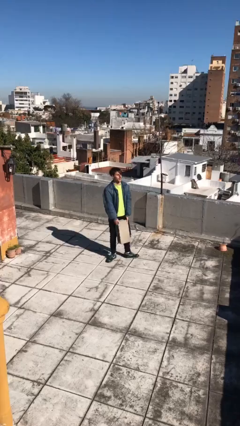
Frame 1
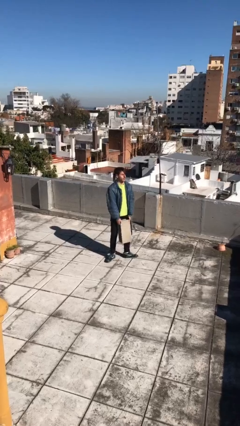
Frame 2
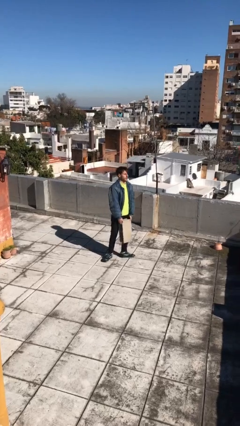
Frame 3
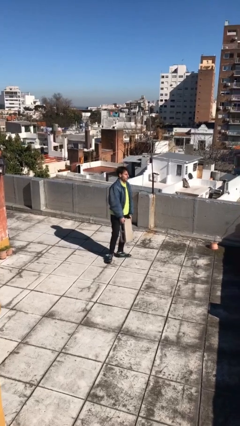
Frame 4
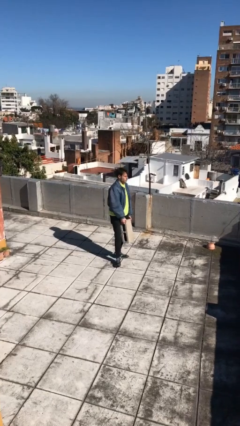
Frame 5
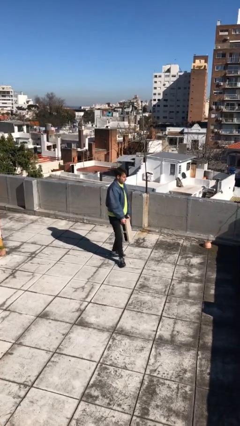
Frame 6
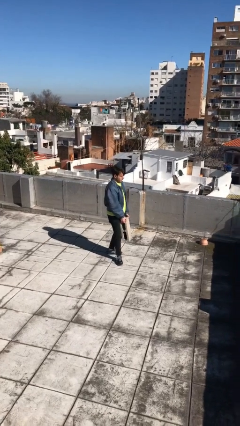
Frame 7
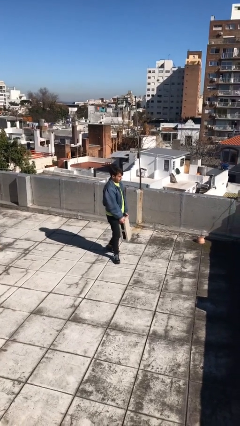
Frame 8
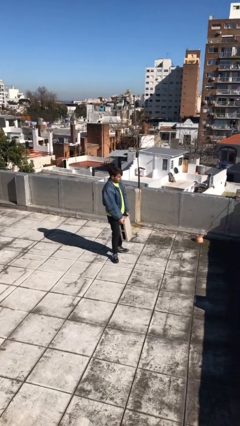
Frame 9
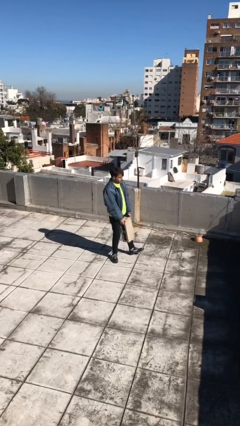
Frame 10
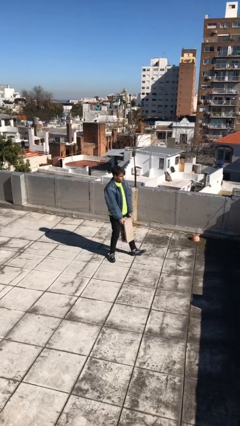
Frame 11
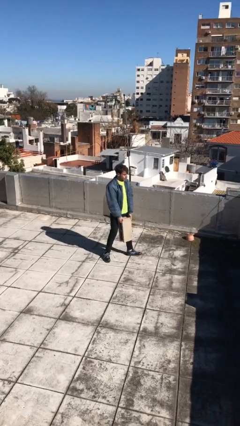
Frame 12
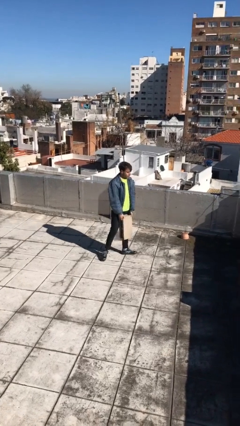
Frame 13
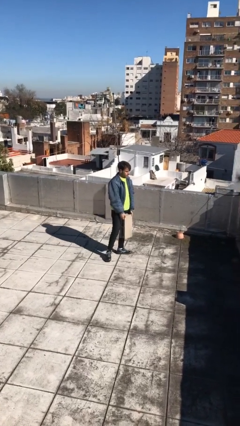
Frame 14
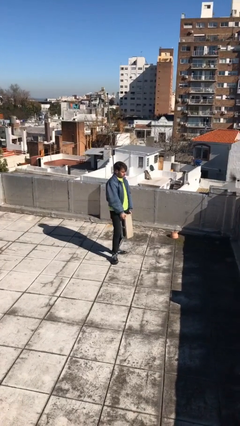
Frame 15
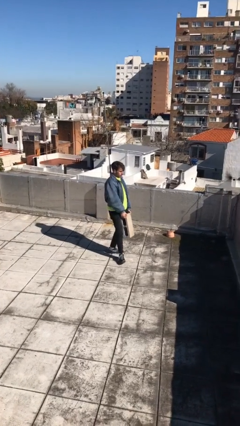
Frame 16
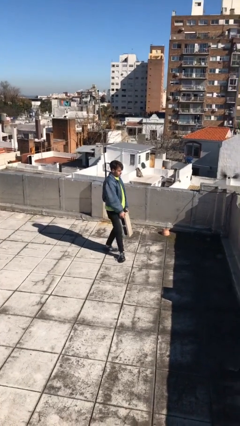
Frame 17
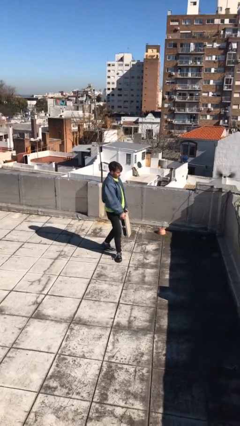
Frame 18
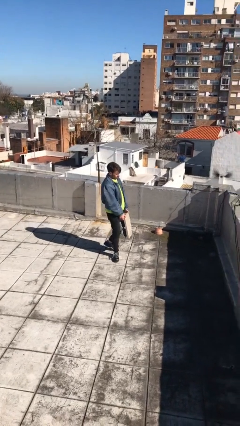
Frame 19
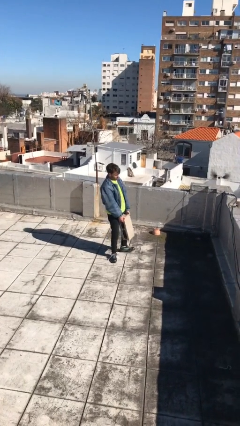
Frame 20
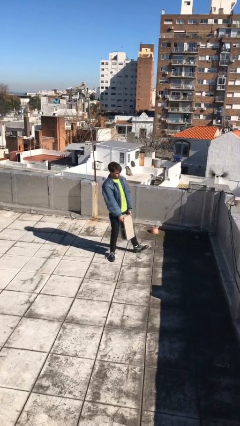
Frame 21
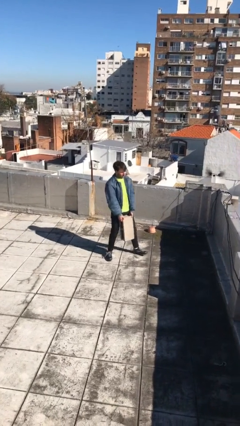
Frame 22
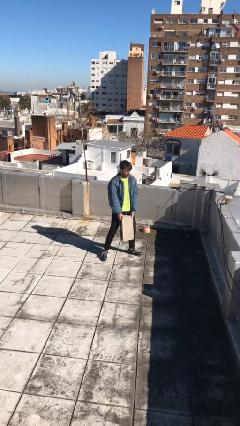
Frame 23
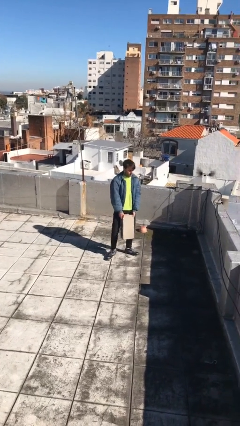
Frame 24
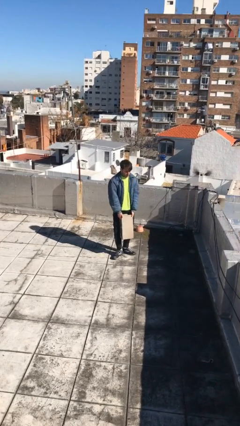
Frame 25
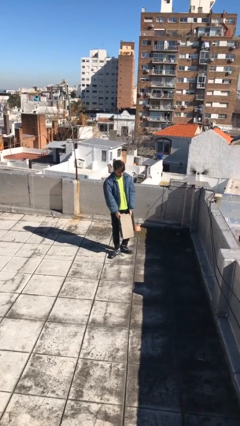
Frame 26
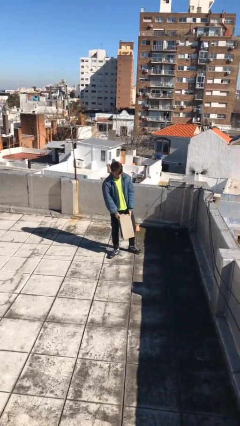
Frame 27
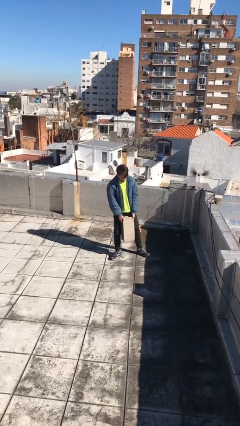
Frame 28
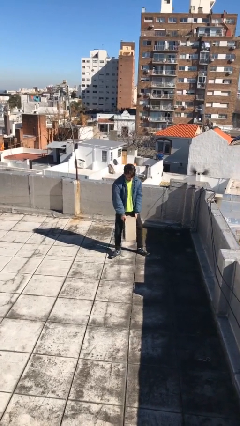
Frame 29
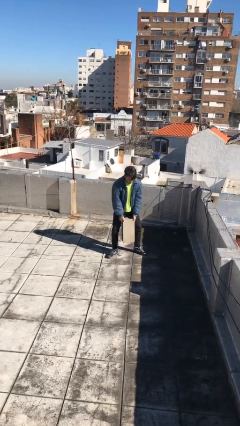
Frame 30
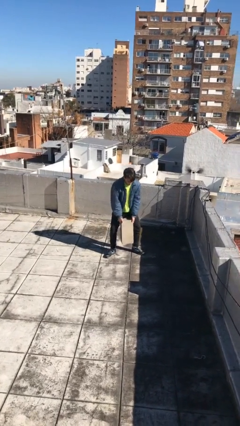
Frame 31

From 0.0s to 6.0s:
person carries heavy object

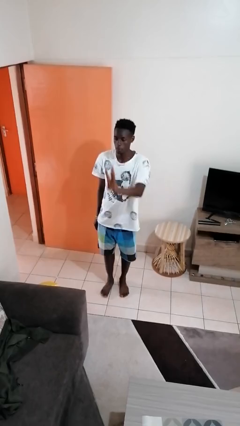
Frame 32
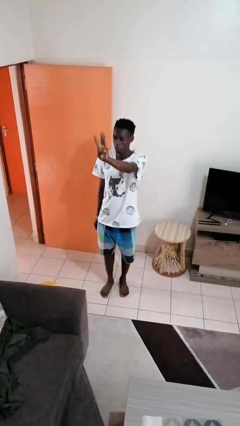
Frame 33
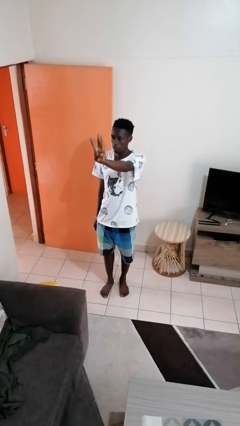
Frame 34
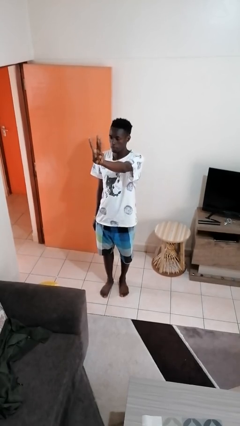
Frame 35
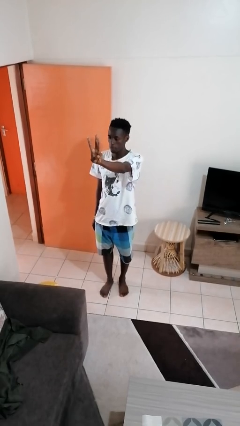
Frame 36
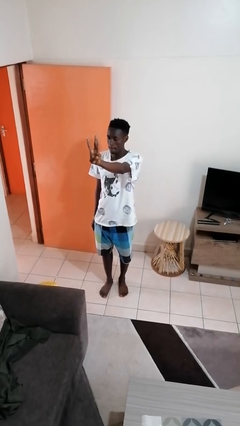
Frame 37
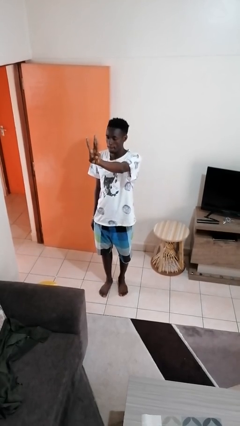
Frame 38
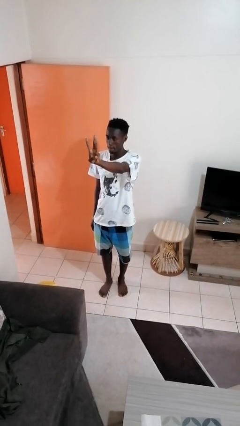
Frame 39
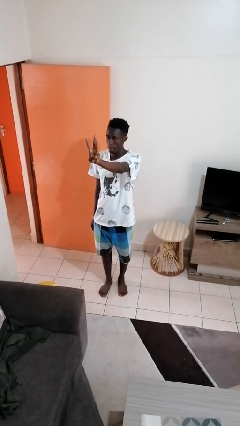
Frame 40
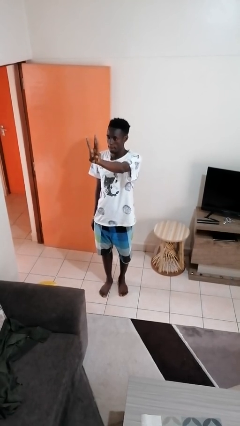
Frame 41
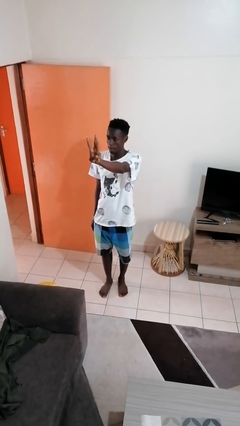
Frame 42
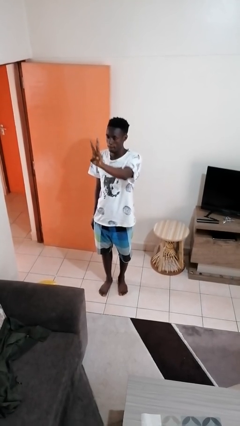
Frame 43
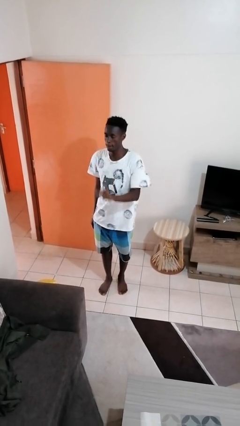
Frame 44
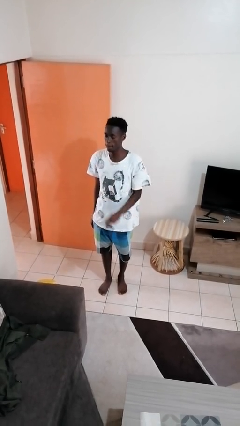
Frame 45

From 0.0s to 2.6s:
person gestures number three

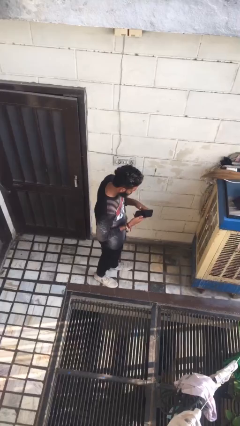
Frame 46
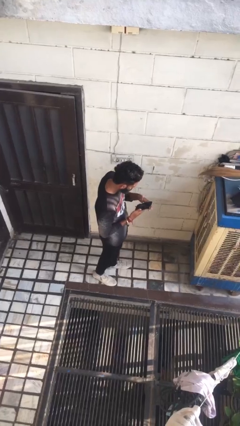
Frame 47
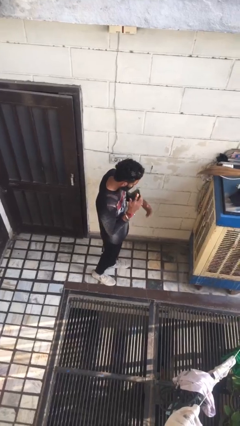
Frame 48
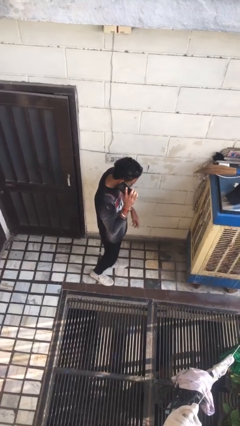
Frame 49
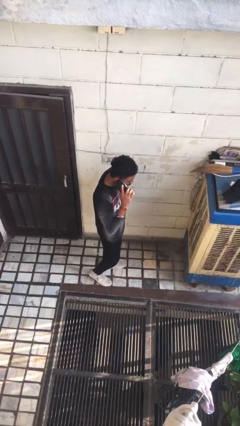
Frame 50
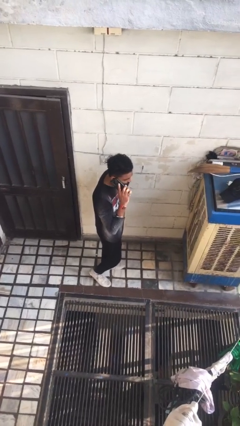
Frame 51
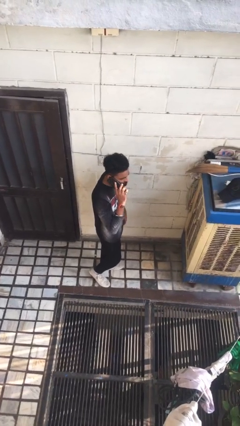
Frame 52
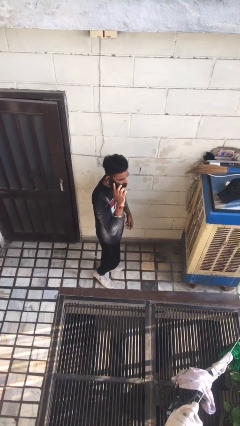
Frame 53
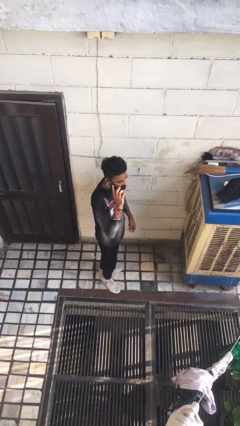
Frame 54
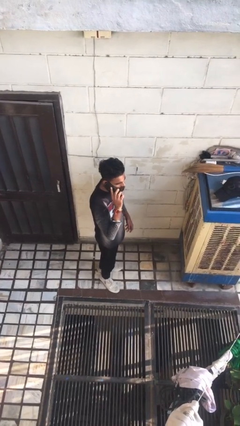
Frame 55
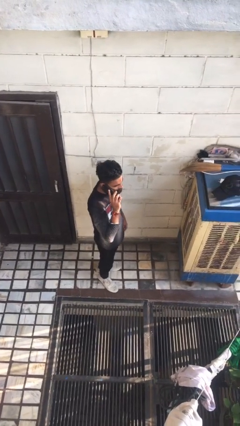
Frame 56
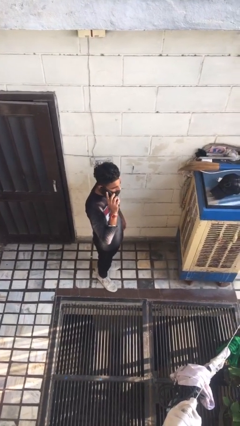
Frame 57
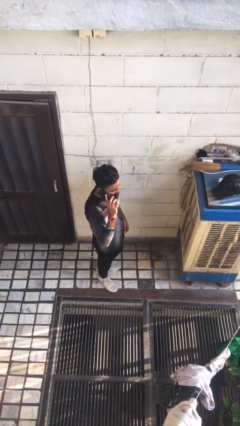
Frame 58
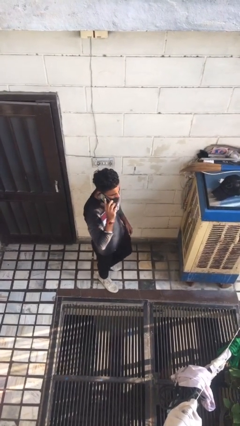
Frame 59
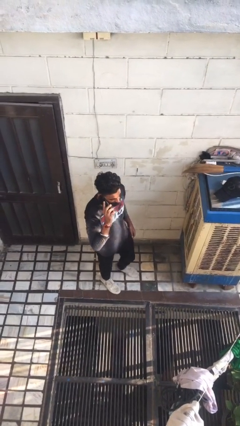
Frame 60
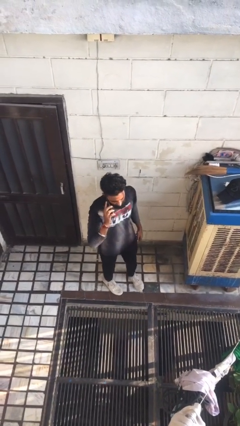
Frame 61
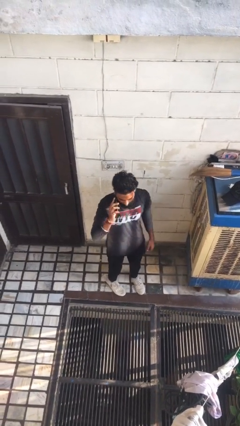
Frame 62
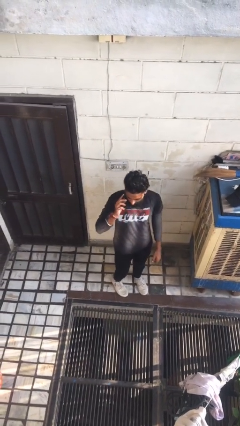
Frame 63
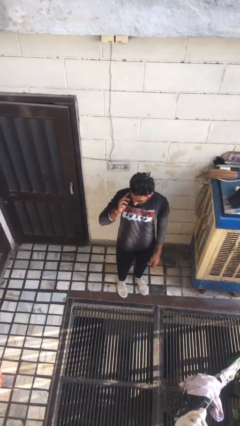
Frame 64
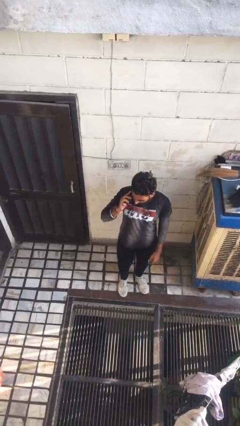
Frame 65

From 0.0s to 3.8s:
person talks on phone

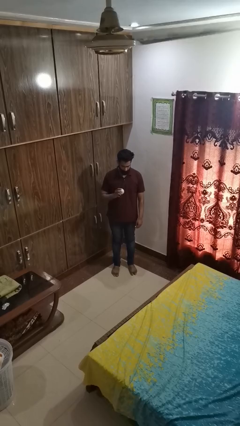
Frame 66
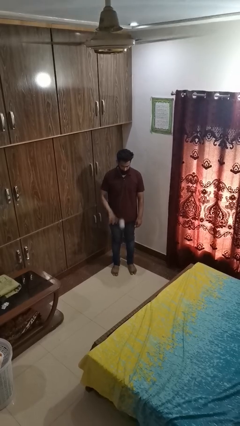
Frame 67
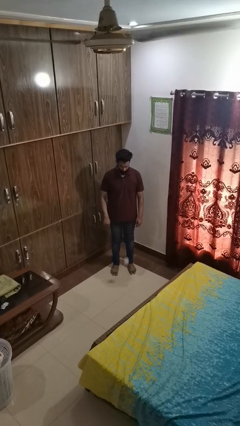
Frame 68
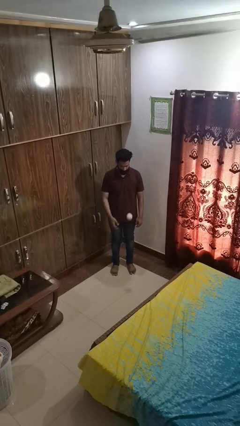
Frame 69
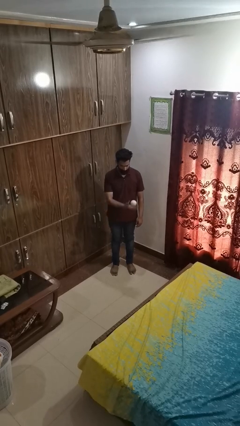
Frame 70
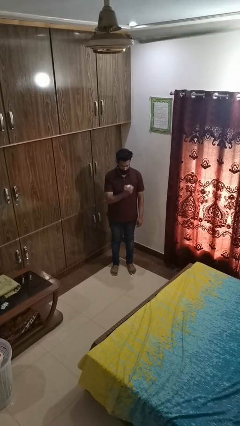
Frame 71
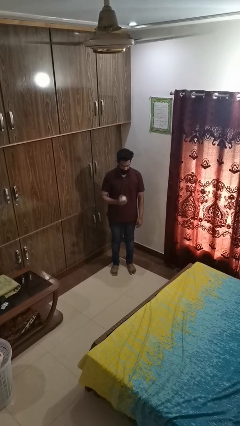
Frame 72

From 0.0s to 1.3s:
person bounces ball on floor

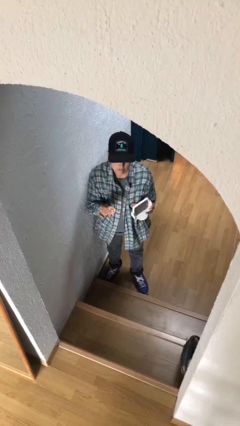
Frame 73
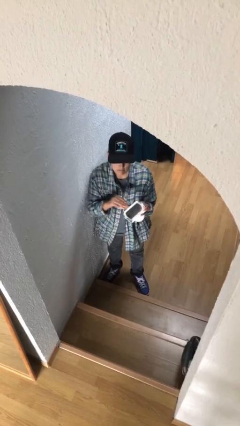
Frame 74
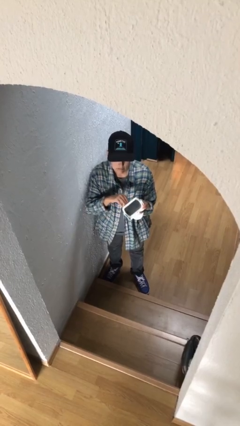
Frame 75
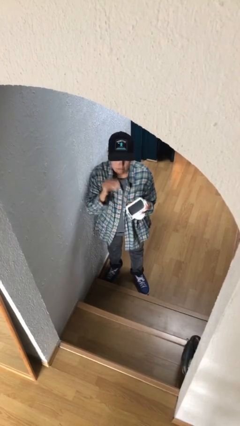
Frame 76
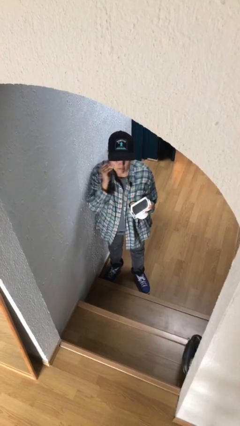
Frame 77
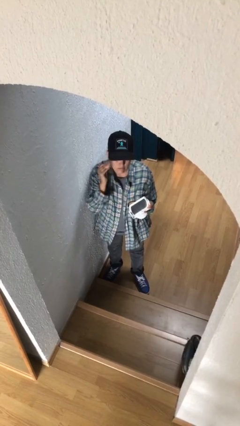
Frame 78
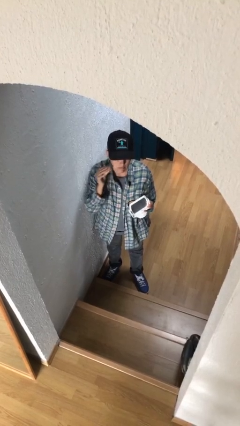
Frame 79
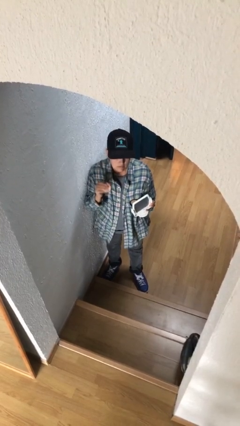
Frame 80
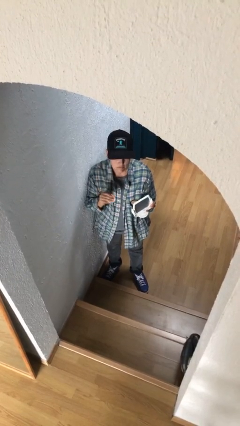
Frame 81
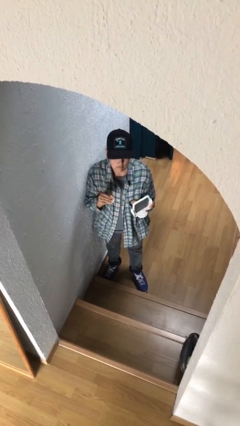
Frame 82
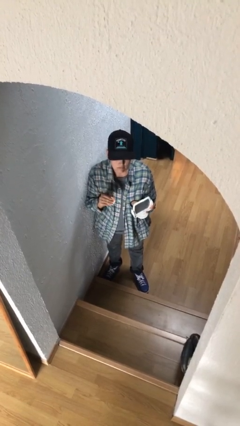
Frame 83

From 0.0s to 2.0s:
person applies foundation makeup

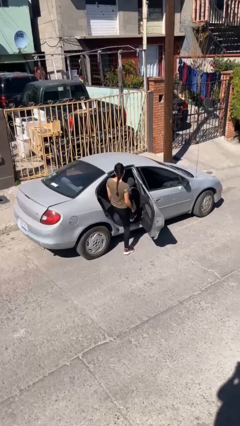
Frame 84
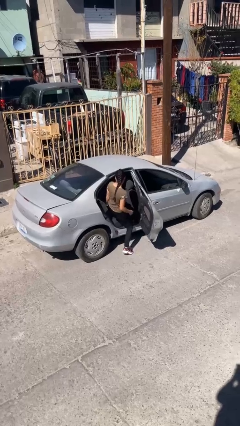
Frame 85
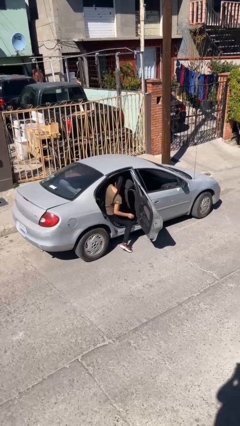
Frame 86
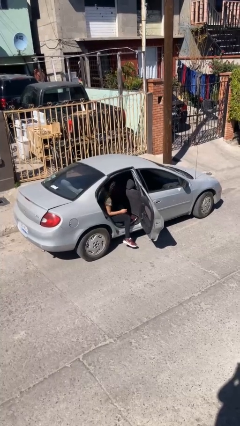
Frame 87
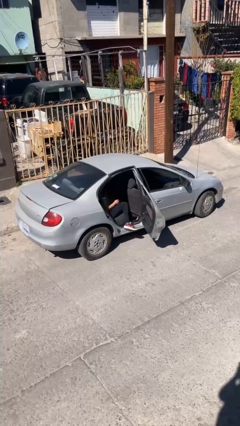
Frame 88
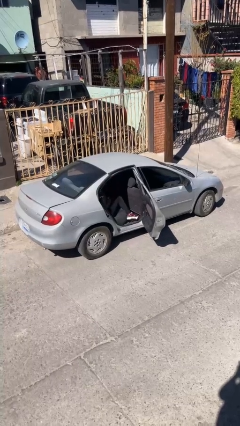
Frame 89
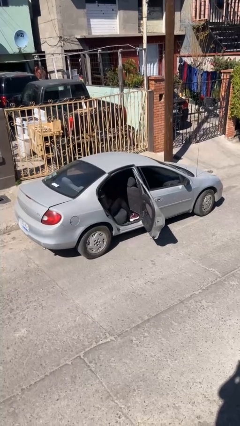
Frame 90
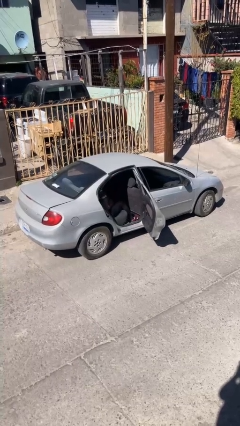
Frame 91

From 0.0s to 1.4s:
person enters car

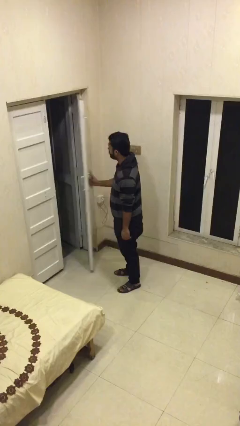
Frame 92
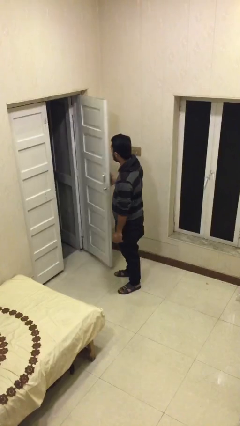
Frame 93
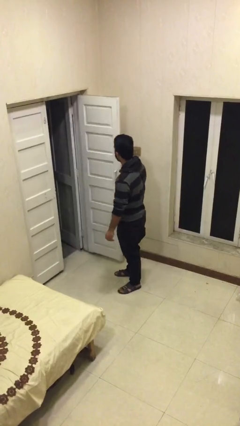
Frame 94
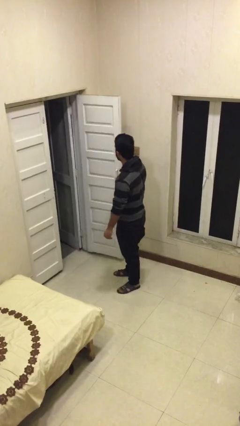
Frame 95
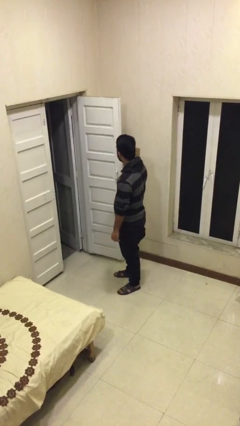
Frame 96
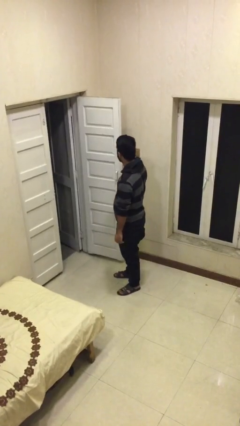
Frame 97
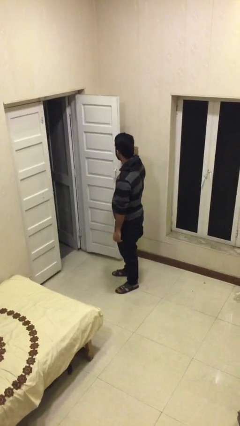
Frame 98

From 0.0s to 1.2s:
person opens facility door
